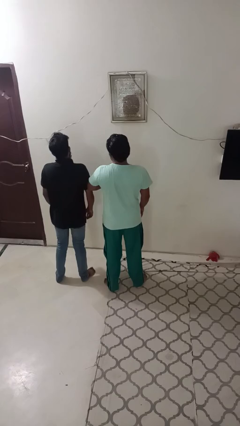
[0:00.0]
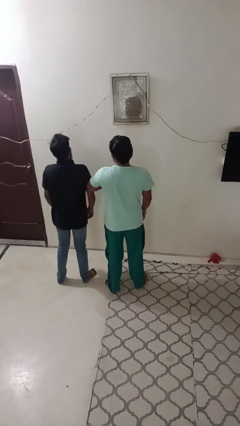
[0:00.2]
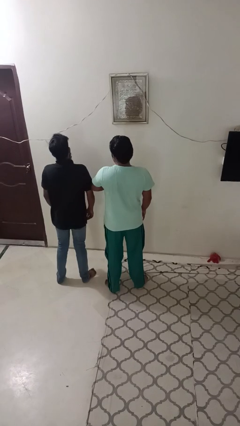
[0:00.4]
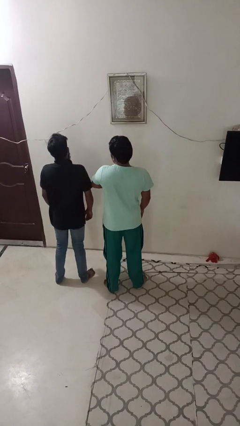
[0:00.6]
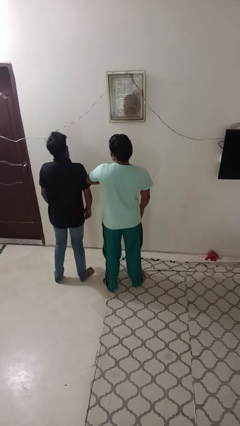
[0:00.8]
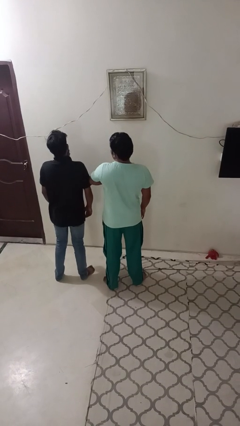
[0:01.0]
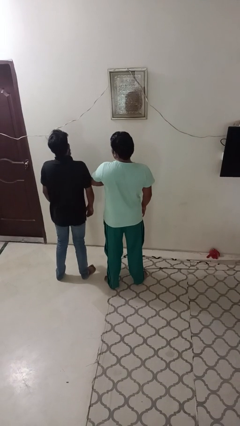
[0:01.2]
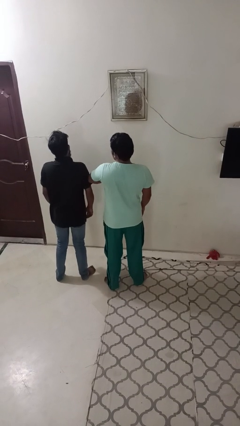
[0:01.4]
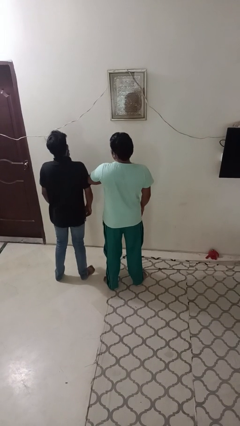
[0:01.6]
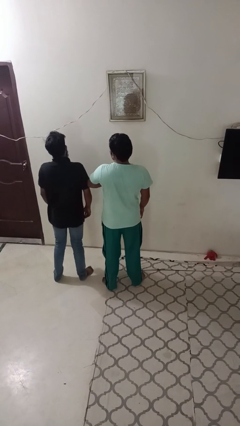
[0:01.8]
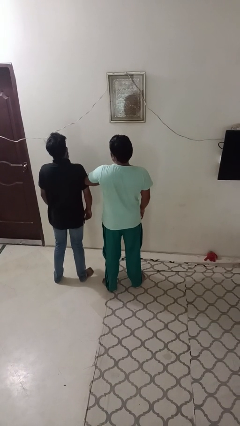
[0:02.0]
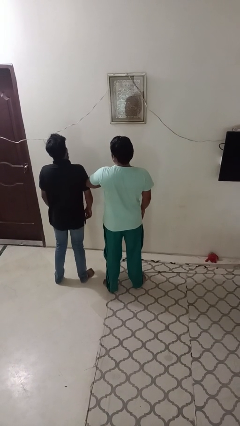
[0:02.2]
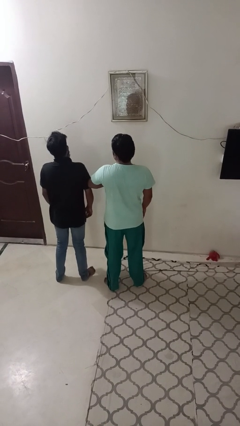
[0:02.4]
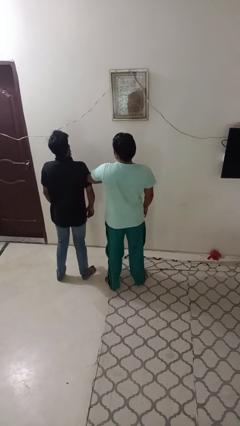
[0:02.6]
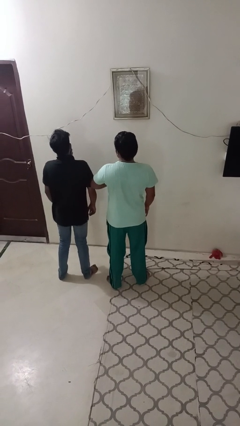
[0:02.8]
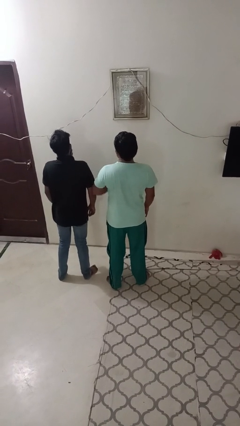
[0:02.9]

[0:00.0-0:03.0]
person nudges person with elbow

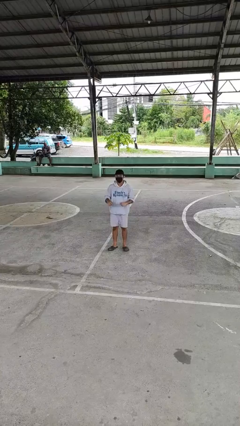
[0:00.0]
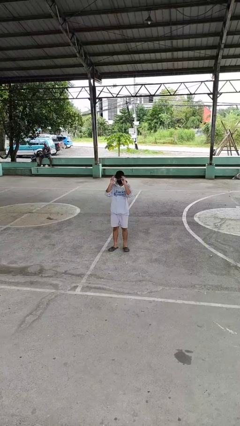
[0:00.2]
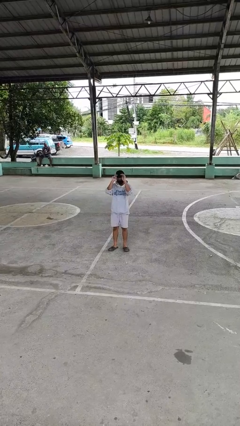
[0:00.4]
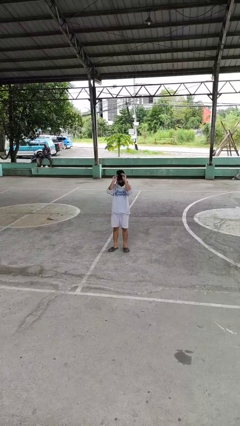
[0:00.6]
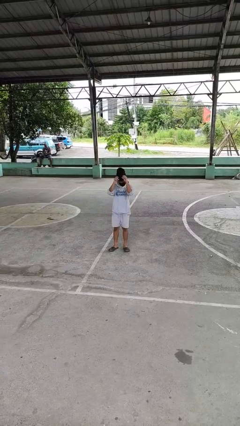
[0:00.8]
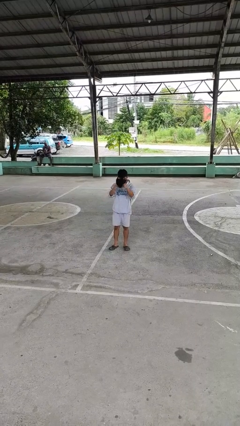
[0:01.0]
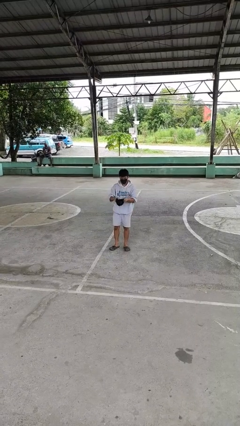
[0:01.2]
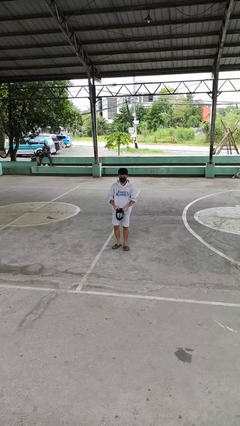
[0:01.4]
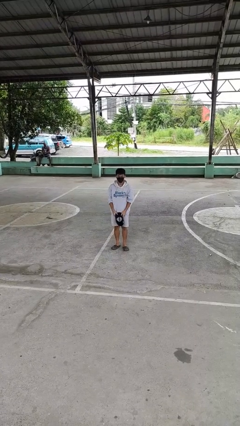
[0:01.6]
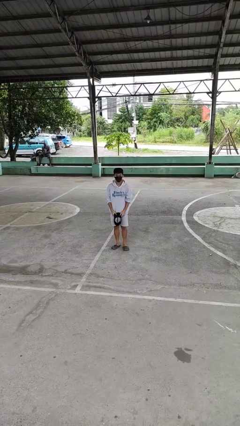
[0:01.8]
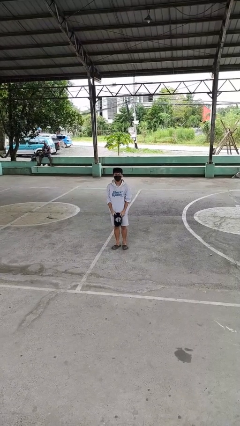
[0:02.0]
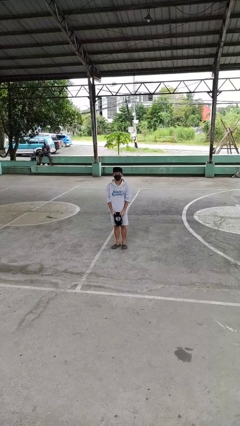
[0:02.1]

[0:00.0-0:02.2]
person takes off hat

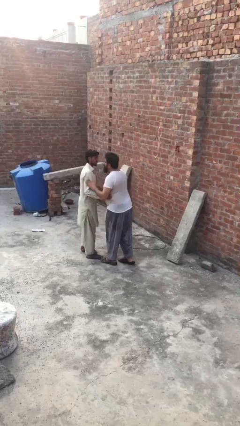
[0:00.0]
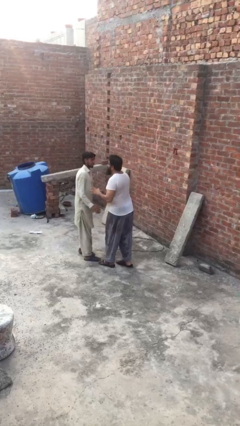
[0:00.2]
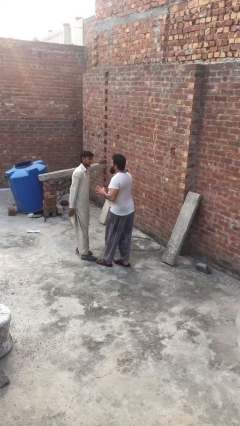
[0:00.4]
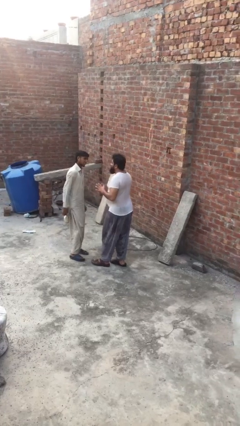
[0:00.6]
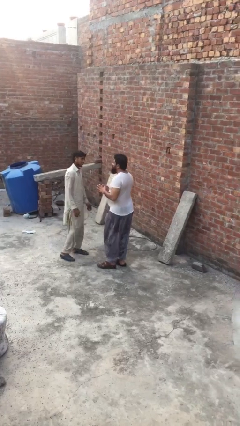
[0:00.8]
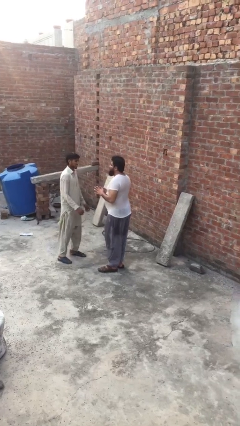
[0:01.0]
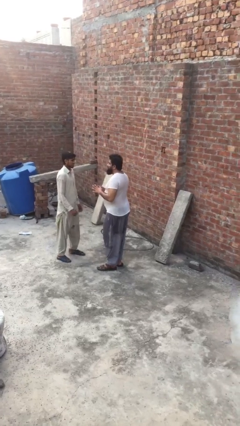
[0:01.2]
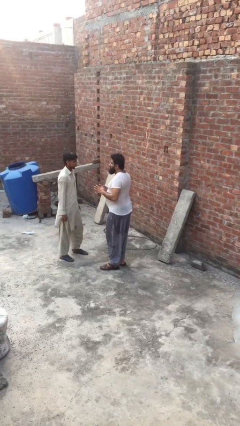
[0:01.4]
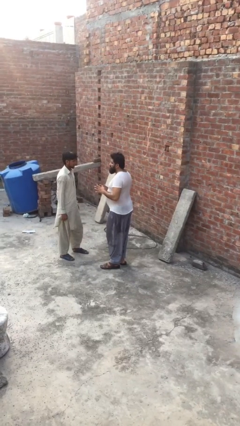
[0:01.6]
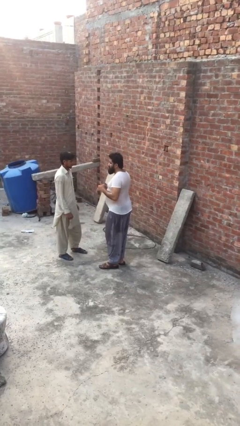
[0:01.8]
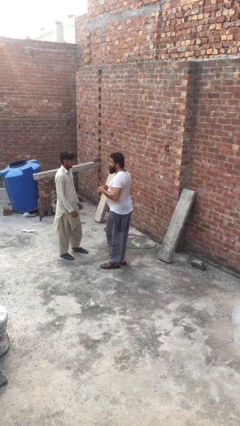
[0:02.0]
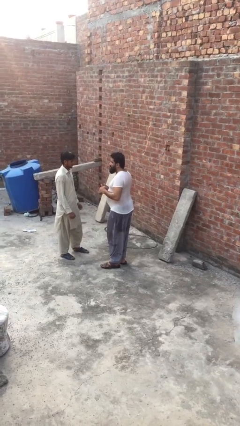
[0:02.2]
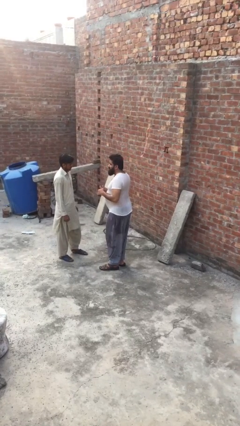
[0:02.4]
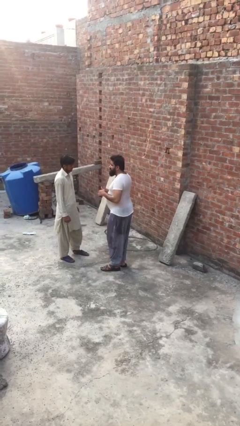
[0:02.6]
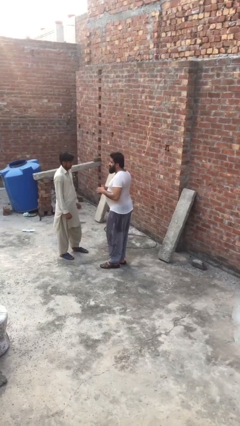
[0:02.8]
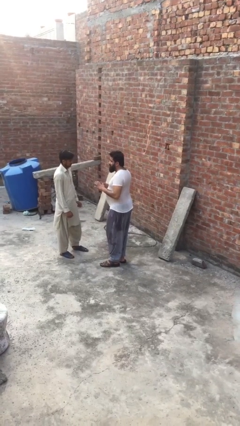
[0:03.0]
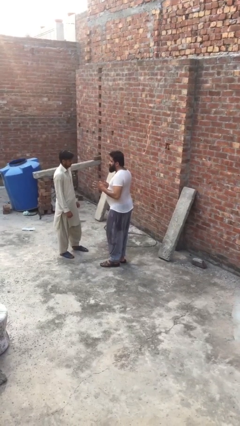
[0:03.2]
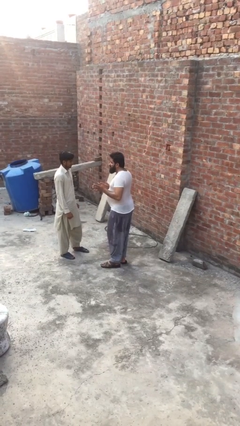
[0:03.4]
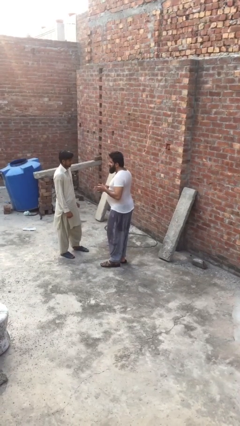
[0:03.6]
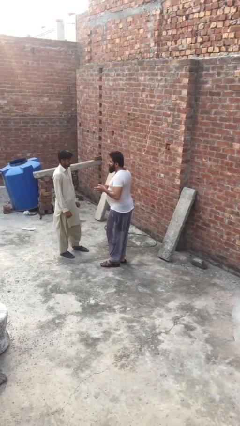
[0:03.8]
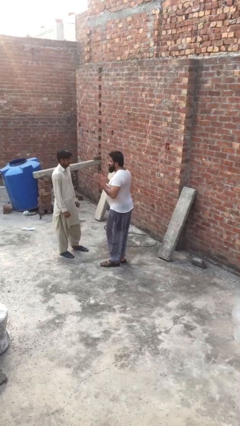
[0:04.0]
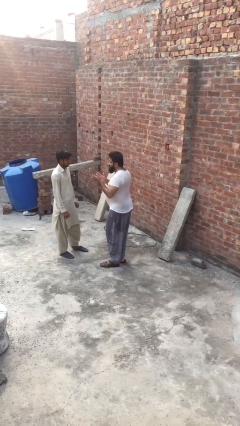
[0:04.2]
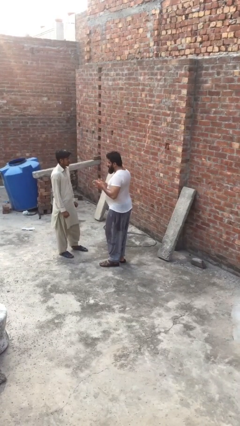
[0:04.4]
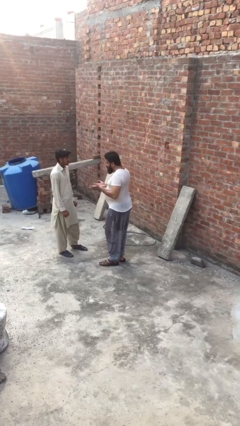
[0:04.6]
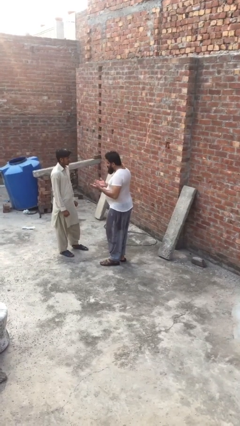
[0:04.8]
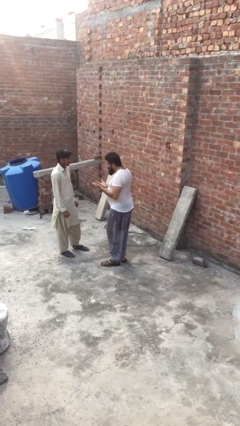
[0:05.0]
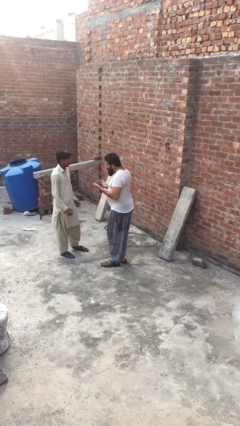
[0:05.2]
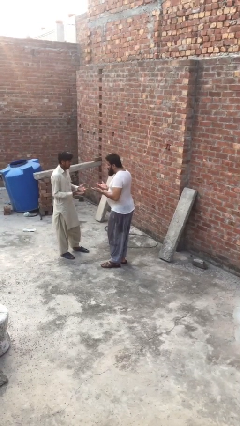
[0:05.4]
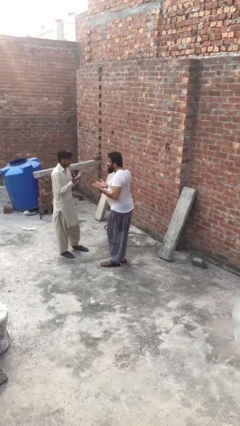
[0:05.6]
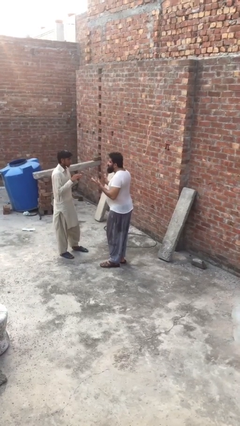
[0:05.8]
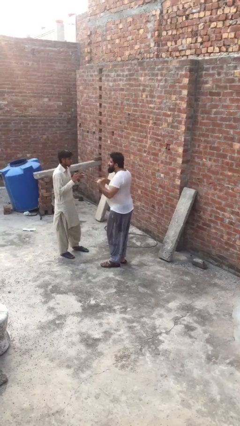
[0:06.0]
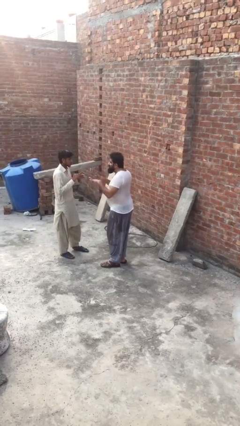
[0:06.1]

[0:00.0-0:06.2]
person talks to person

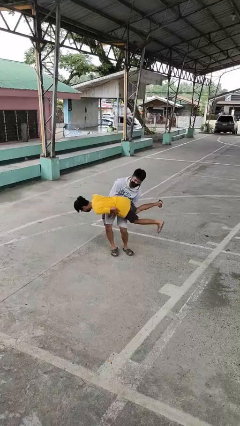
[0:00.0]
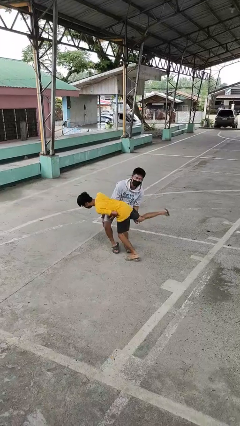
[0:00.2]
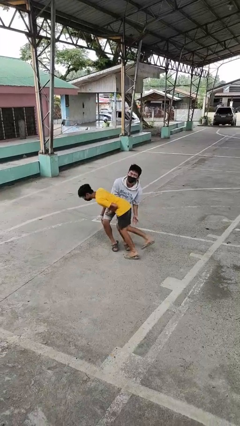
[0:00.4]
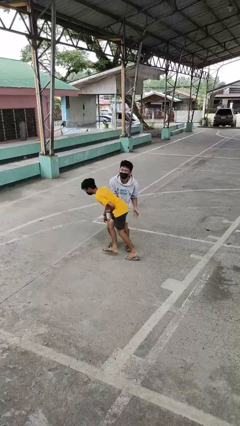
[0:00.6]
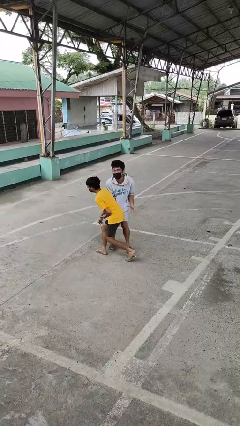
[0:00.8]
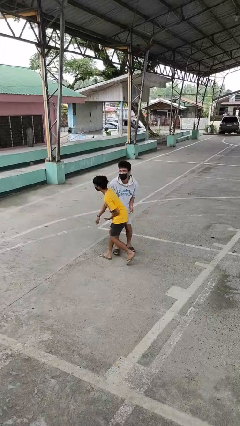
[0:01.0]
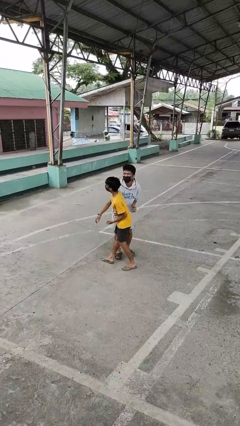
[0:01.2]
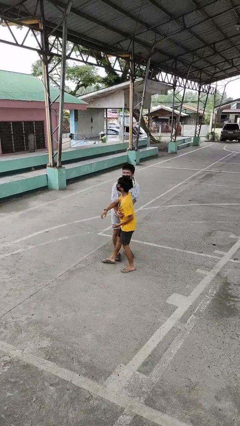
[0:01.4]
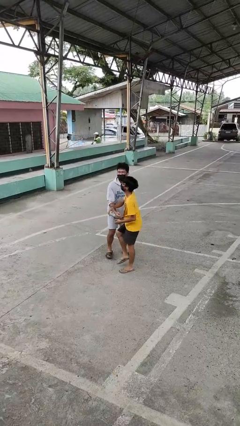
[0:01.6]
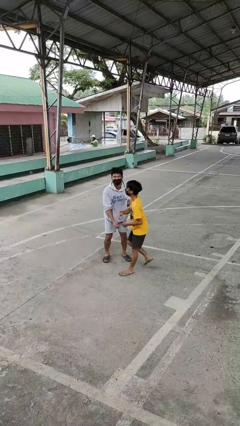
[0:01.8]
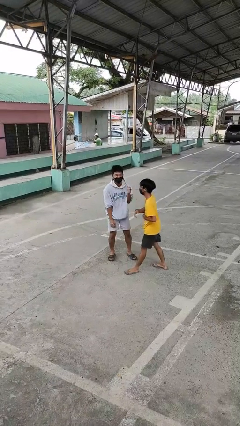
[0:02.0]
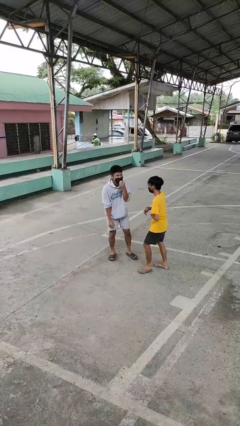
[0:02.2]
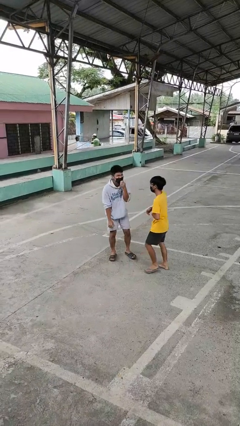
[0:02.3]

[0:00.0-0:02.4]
person puts down person

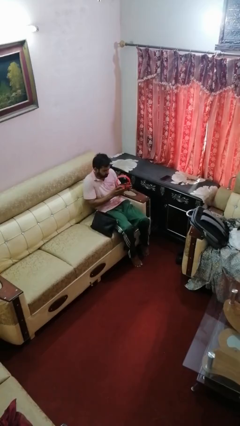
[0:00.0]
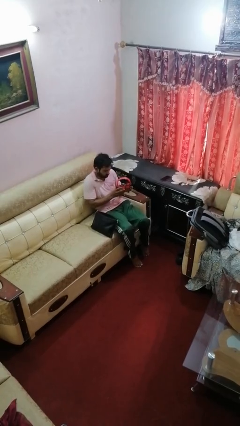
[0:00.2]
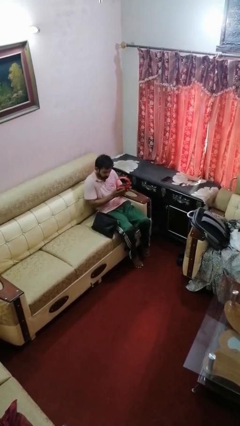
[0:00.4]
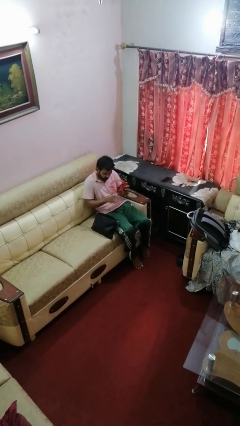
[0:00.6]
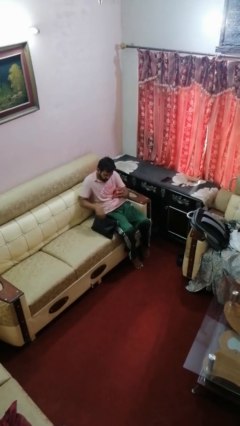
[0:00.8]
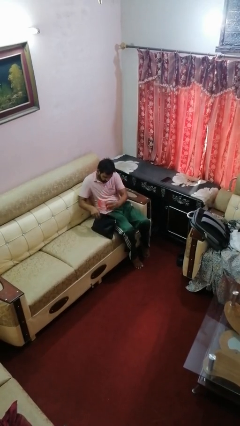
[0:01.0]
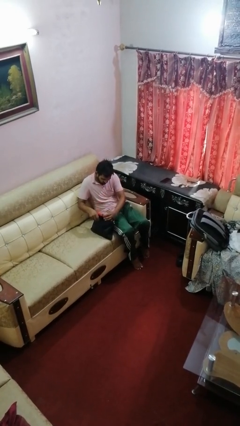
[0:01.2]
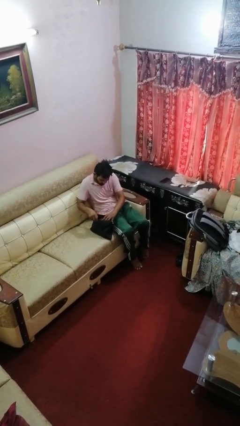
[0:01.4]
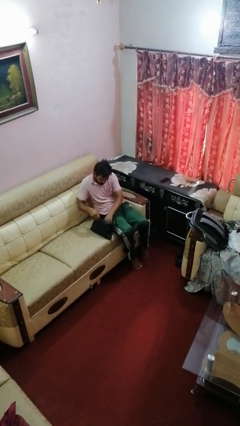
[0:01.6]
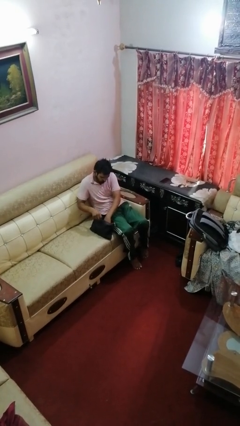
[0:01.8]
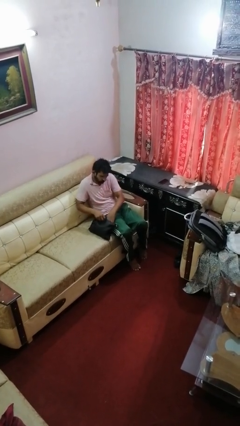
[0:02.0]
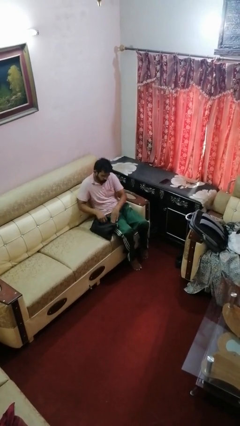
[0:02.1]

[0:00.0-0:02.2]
person puts object into purse

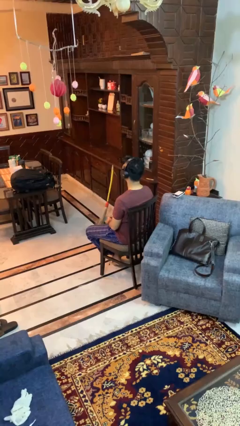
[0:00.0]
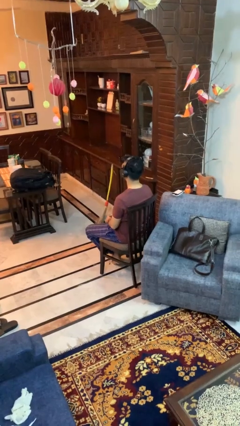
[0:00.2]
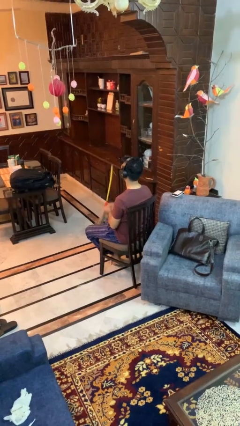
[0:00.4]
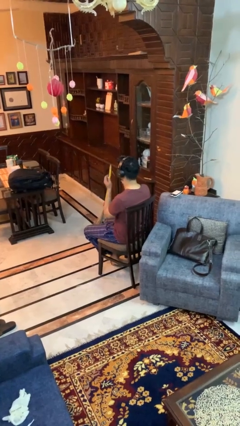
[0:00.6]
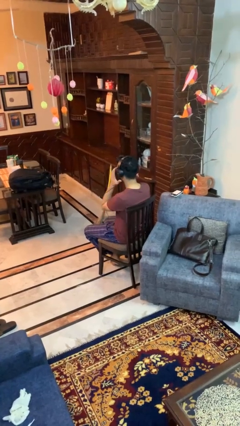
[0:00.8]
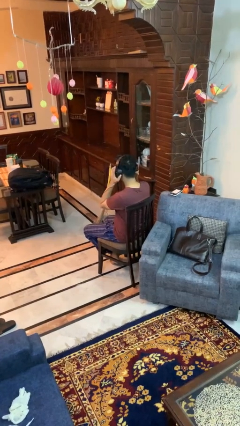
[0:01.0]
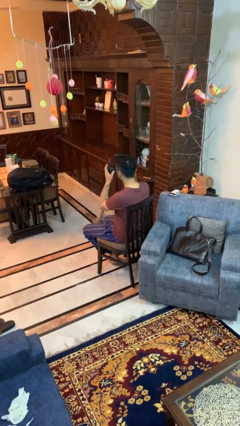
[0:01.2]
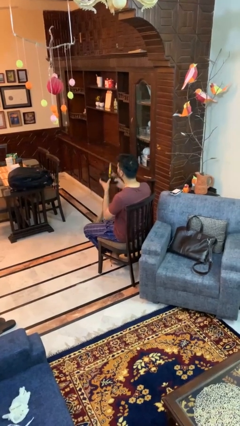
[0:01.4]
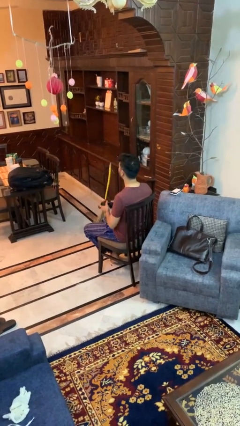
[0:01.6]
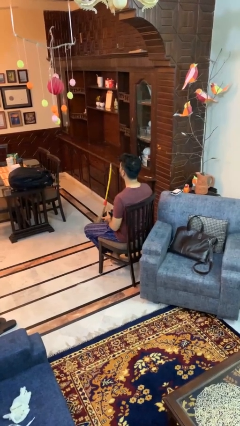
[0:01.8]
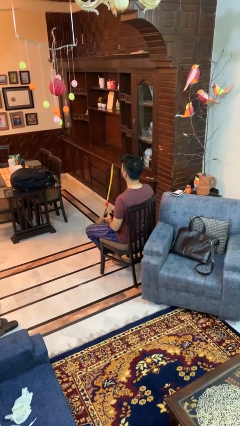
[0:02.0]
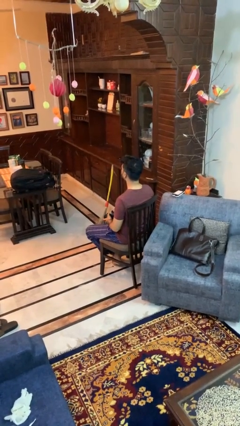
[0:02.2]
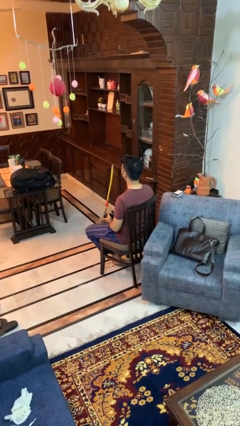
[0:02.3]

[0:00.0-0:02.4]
person takes off headphones
